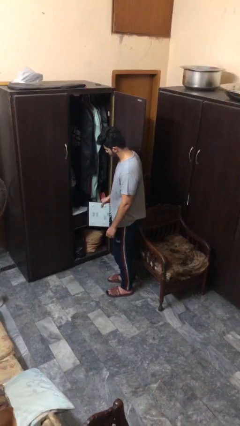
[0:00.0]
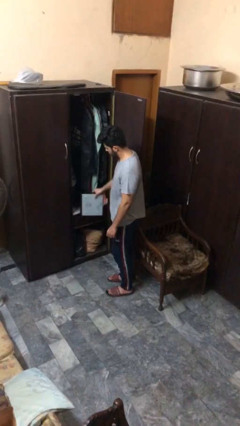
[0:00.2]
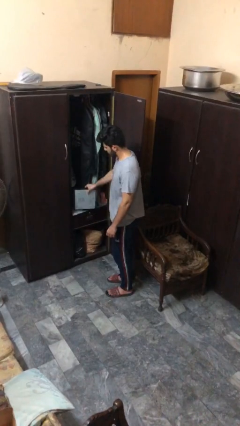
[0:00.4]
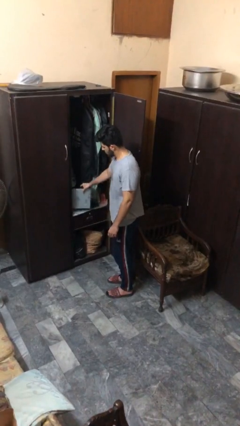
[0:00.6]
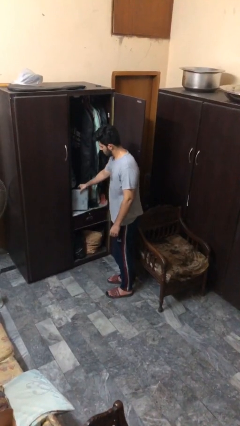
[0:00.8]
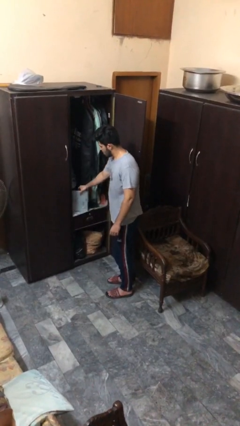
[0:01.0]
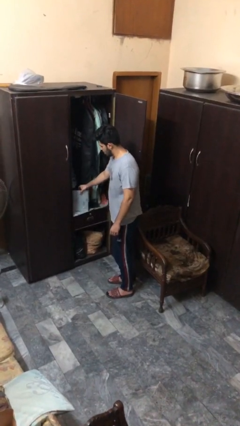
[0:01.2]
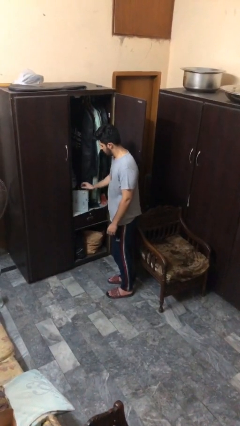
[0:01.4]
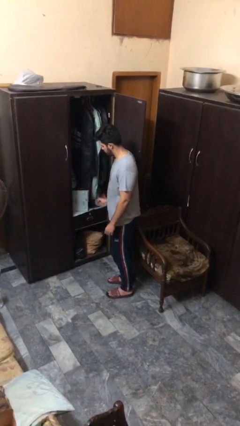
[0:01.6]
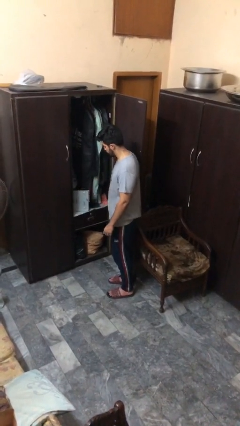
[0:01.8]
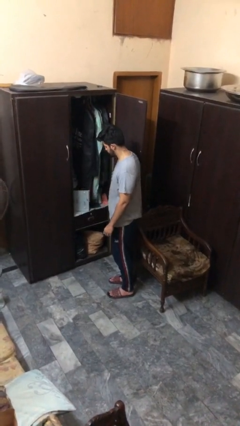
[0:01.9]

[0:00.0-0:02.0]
person puts down object on countertop

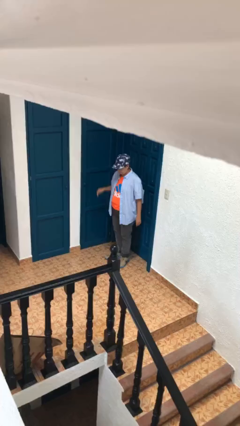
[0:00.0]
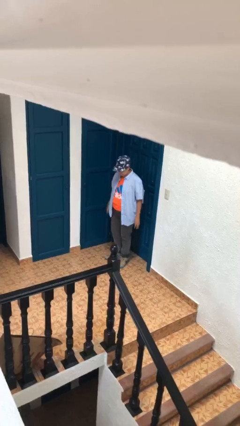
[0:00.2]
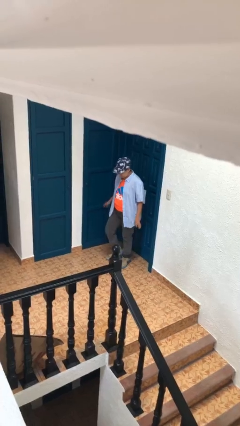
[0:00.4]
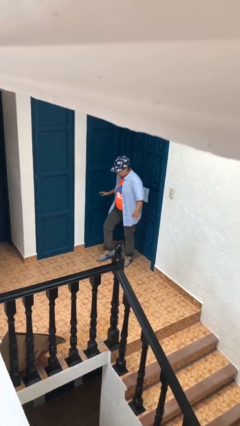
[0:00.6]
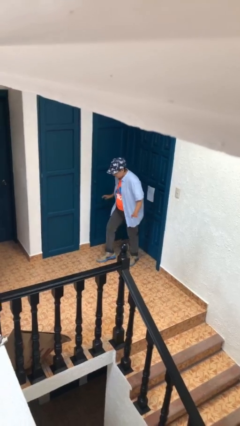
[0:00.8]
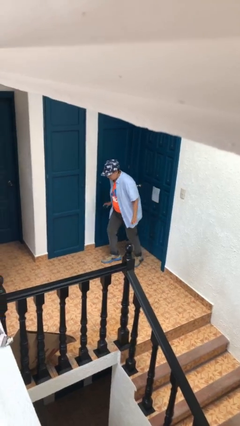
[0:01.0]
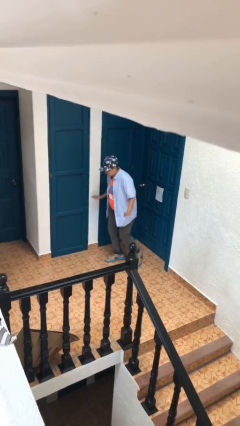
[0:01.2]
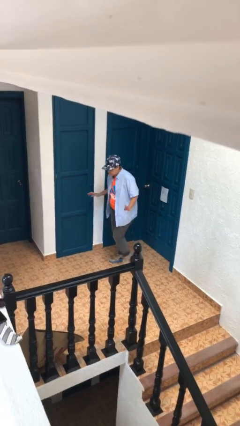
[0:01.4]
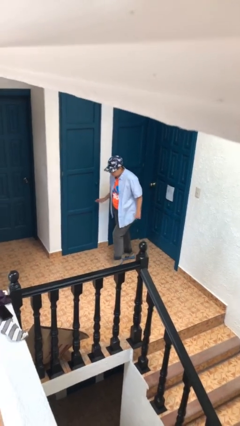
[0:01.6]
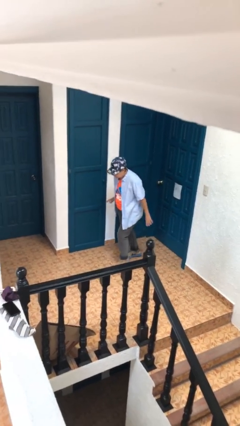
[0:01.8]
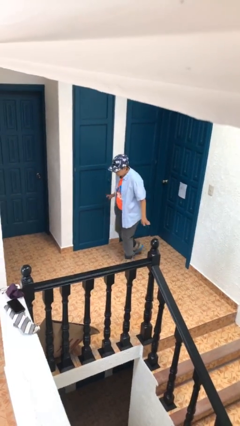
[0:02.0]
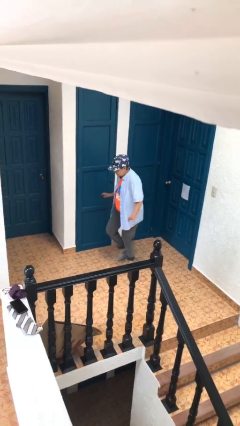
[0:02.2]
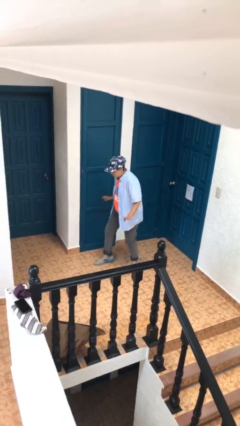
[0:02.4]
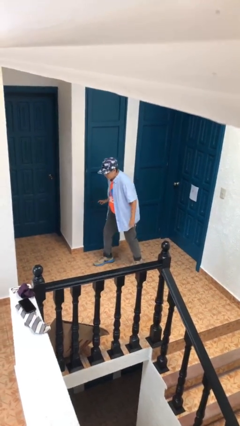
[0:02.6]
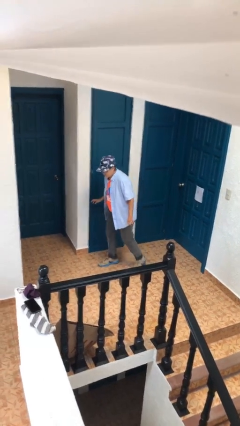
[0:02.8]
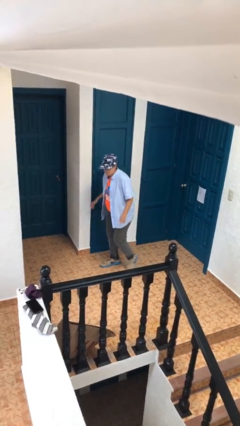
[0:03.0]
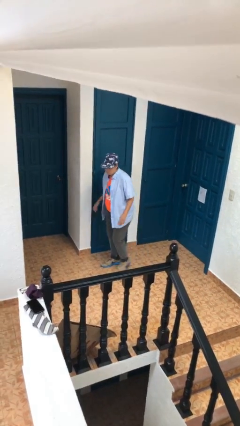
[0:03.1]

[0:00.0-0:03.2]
person walks tiptoe

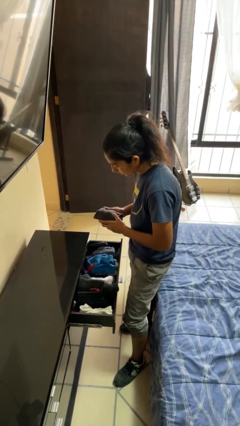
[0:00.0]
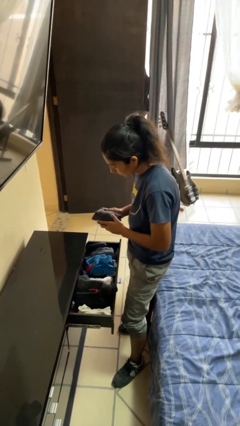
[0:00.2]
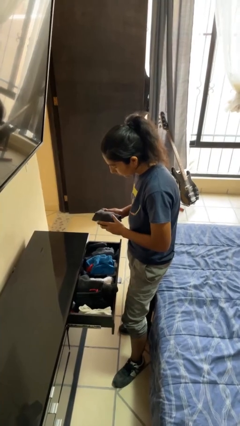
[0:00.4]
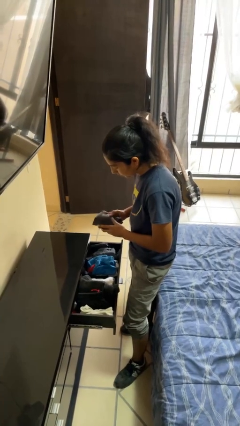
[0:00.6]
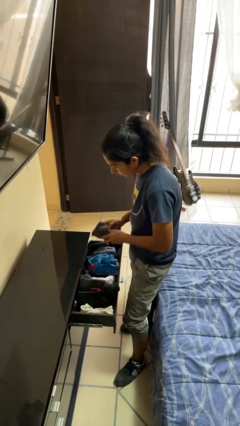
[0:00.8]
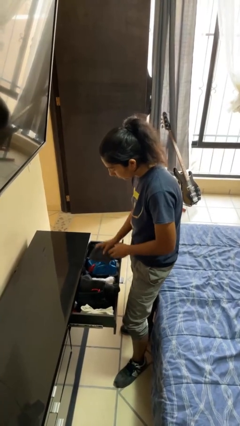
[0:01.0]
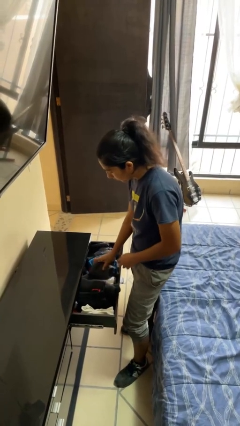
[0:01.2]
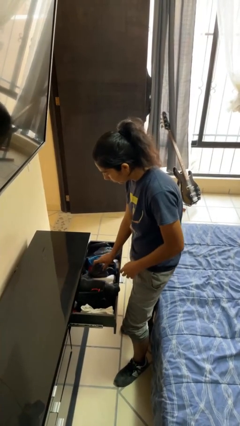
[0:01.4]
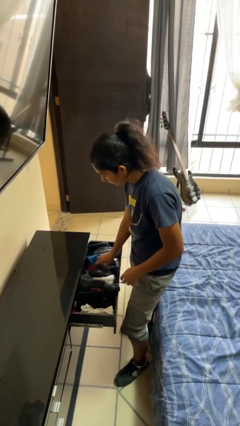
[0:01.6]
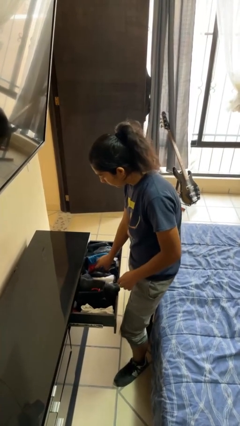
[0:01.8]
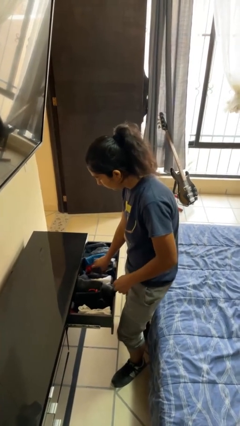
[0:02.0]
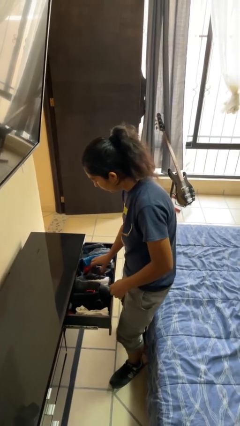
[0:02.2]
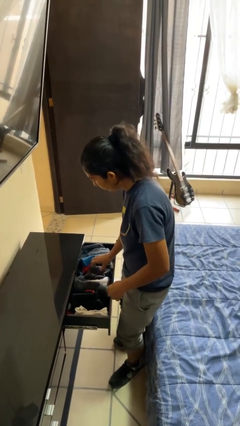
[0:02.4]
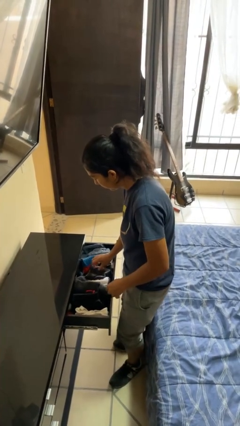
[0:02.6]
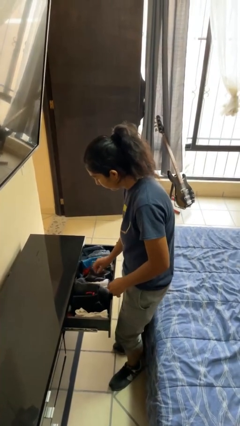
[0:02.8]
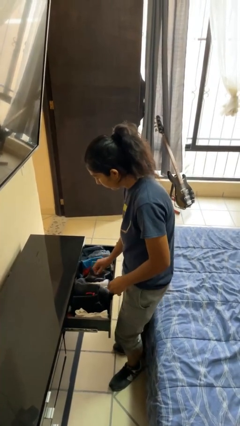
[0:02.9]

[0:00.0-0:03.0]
person puts clothes into dresser

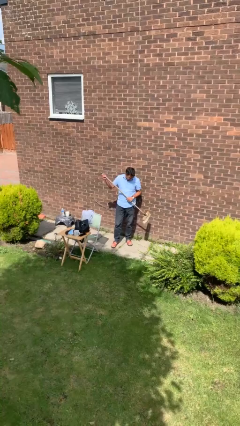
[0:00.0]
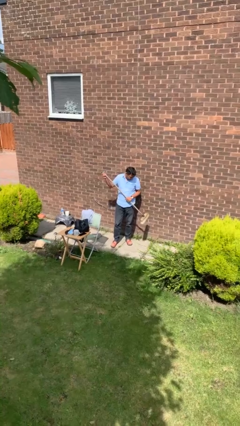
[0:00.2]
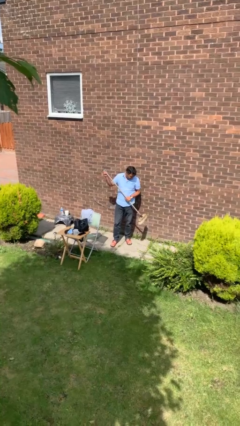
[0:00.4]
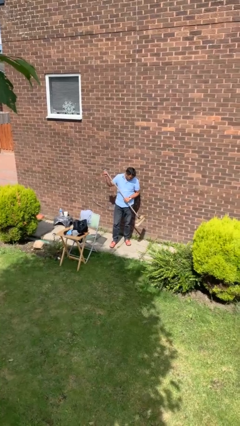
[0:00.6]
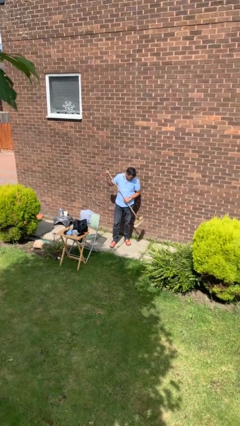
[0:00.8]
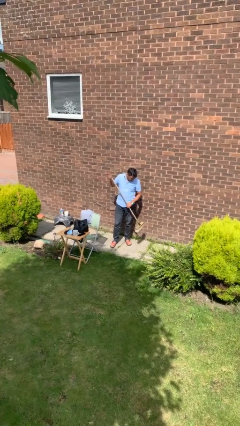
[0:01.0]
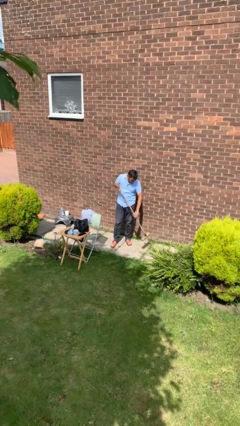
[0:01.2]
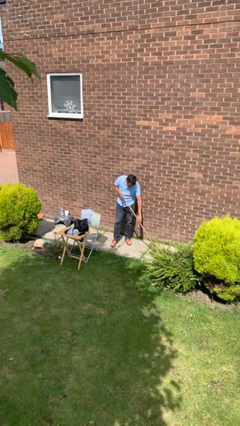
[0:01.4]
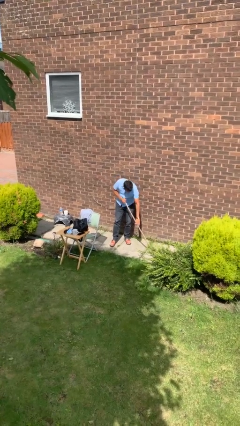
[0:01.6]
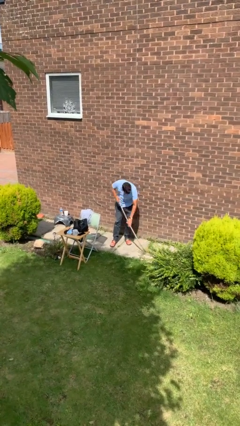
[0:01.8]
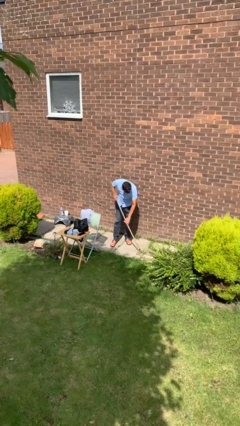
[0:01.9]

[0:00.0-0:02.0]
person sweeps floor

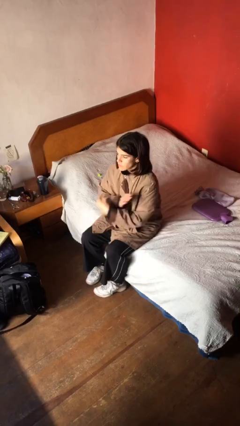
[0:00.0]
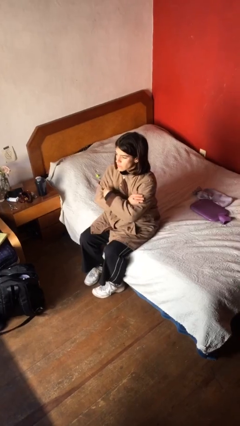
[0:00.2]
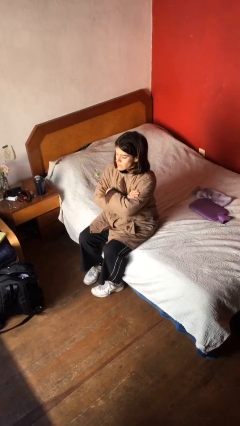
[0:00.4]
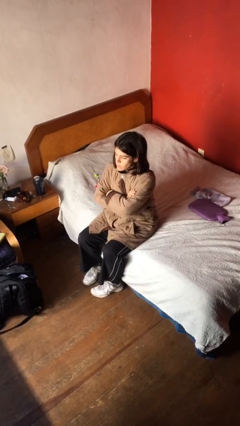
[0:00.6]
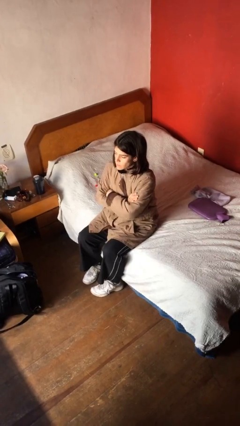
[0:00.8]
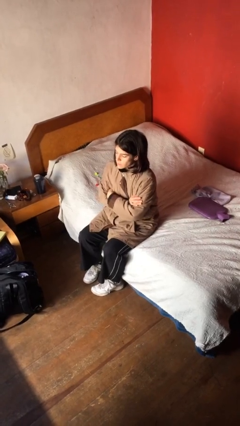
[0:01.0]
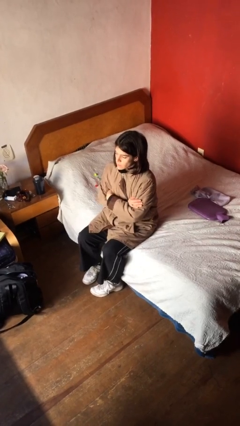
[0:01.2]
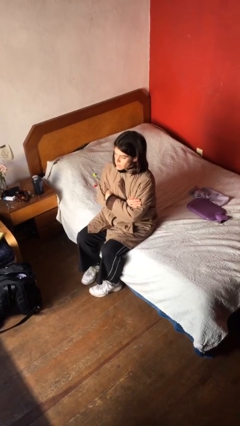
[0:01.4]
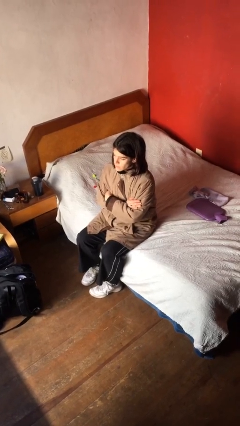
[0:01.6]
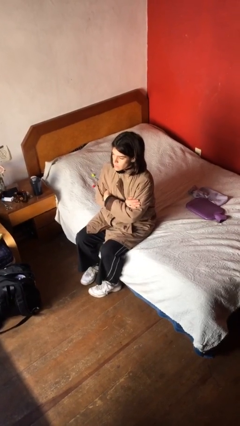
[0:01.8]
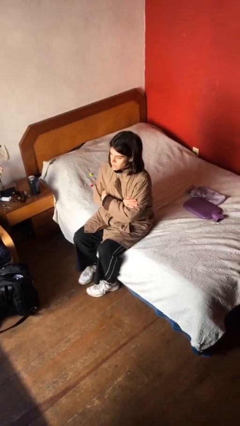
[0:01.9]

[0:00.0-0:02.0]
person crosses arms

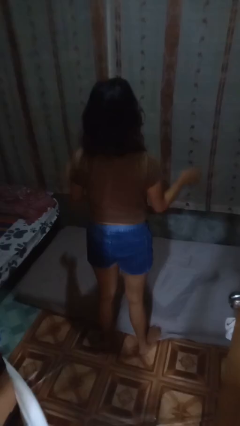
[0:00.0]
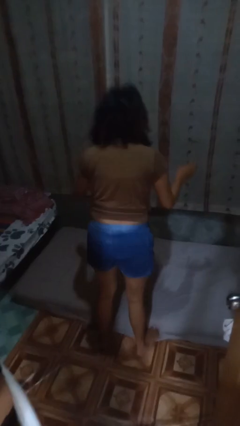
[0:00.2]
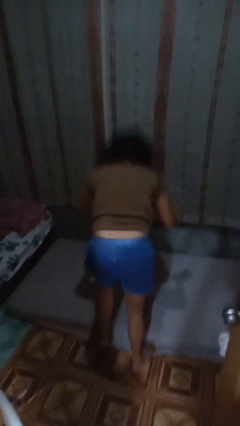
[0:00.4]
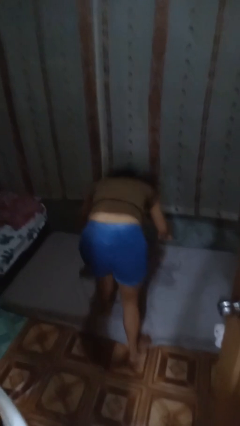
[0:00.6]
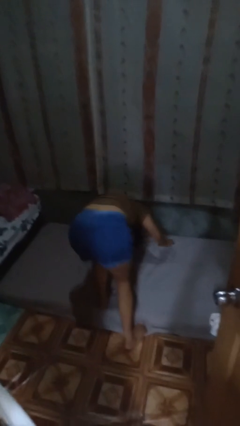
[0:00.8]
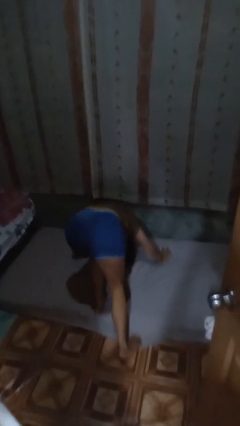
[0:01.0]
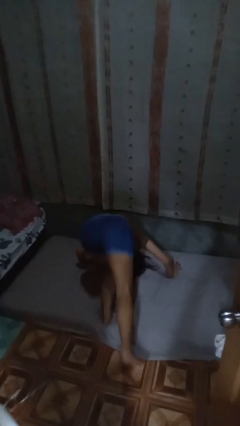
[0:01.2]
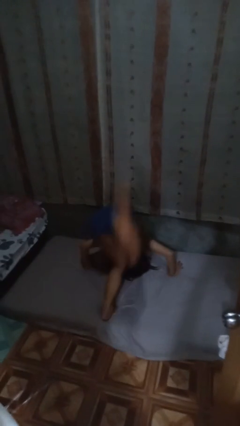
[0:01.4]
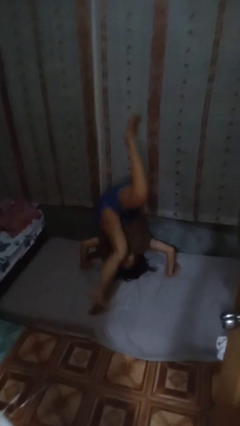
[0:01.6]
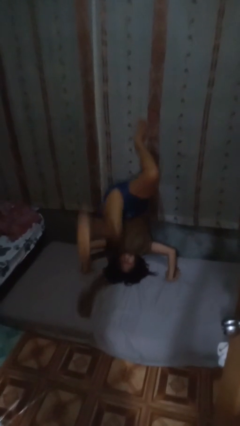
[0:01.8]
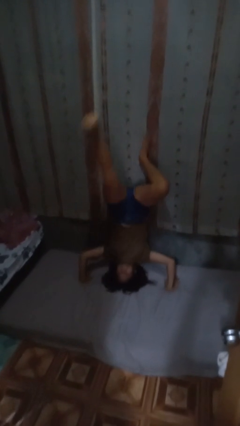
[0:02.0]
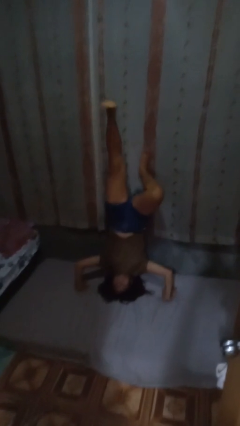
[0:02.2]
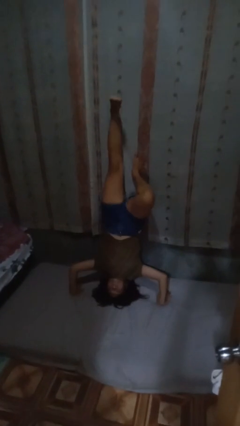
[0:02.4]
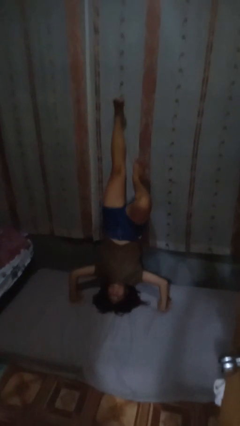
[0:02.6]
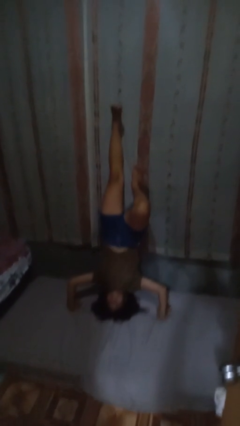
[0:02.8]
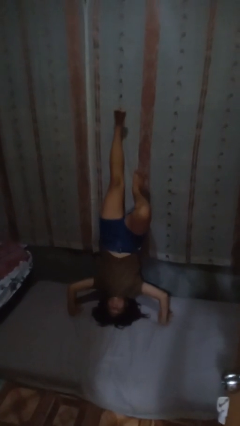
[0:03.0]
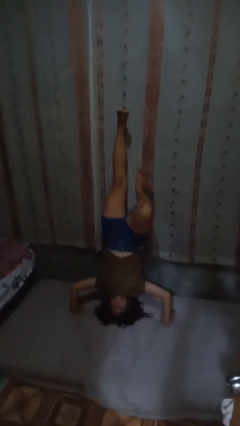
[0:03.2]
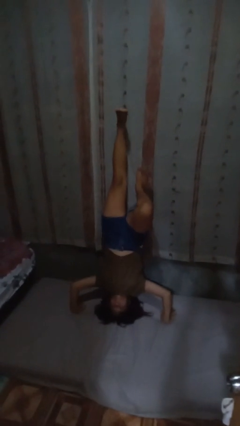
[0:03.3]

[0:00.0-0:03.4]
person handstand

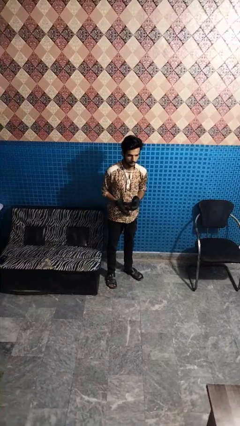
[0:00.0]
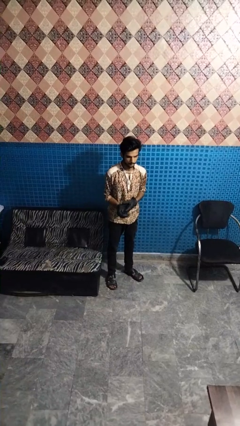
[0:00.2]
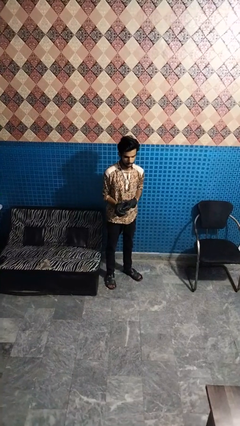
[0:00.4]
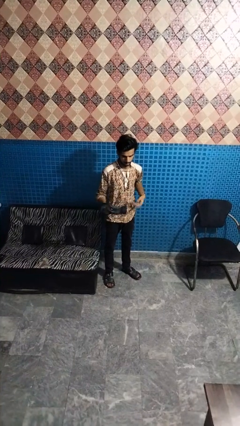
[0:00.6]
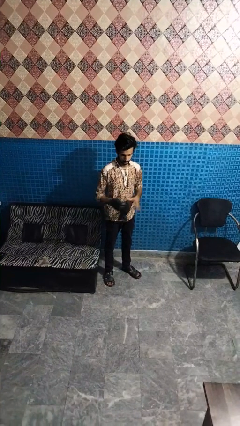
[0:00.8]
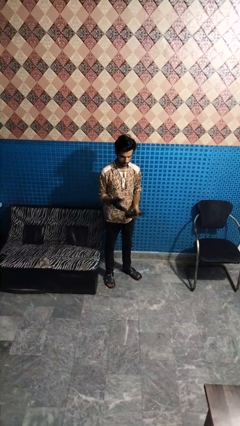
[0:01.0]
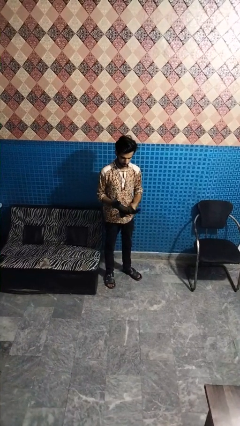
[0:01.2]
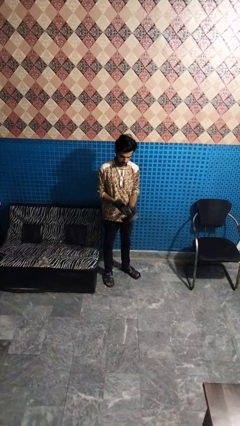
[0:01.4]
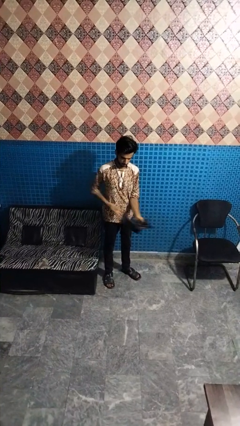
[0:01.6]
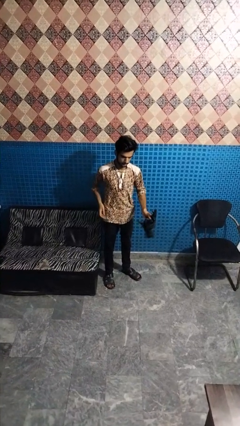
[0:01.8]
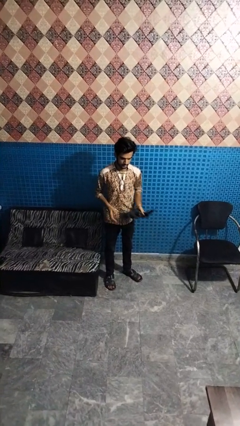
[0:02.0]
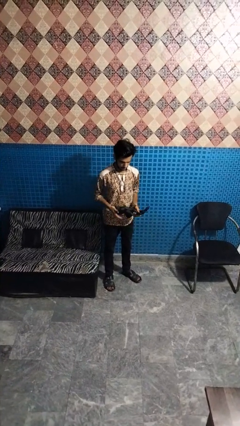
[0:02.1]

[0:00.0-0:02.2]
person takes off gloves
